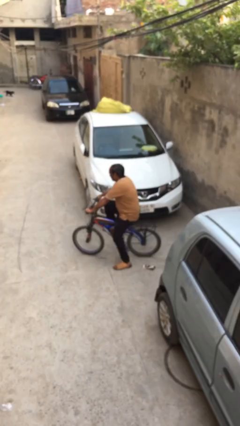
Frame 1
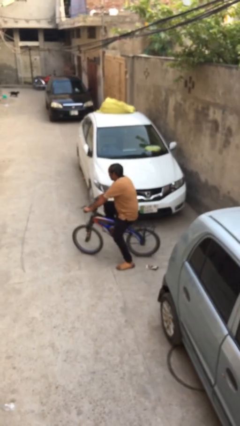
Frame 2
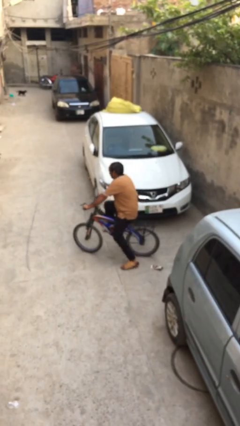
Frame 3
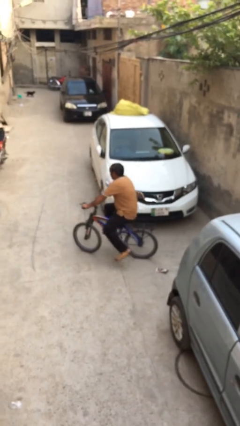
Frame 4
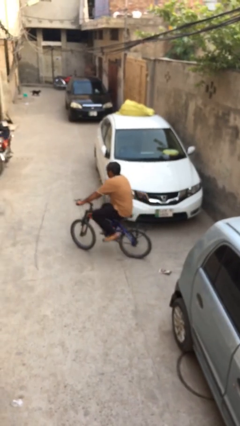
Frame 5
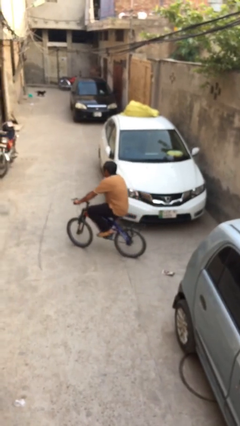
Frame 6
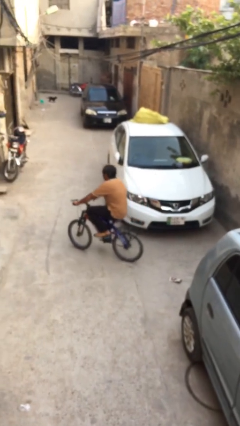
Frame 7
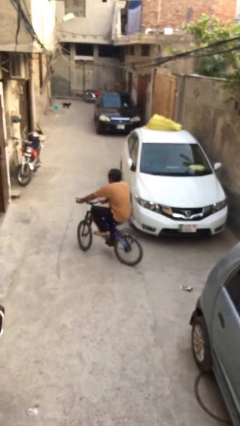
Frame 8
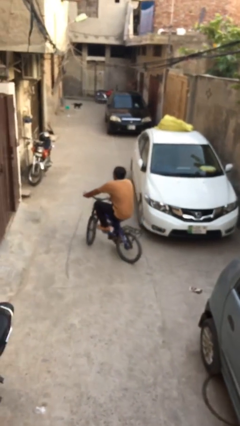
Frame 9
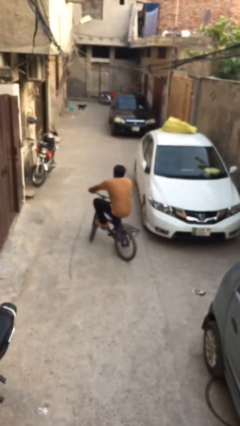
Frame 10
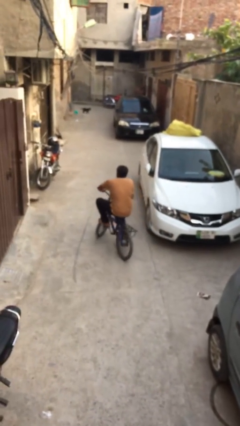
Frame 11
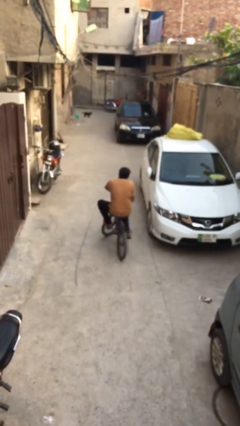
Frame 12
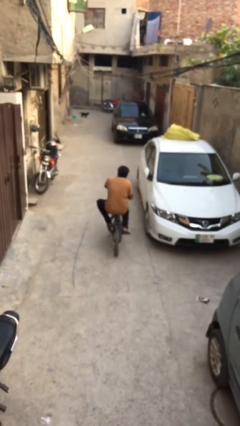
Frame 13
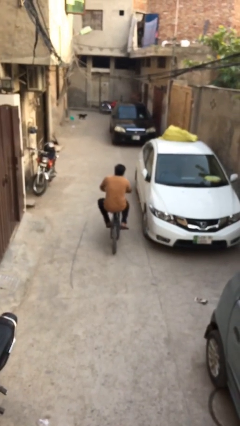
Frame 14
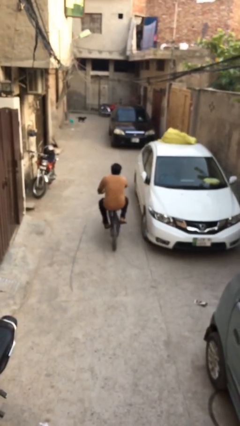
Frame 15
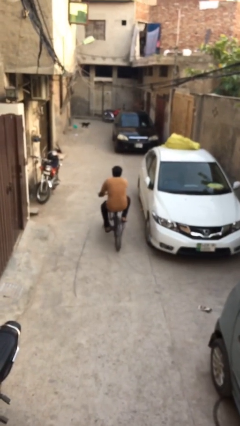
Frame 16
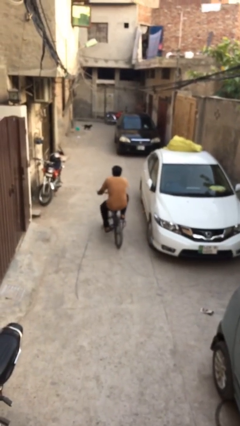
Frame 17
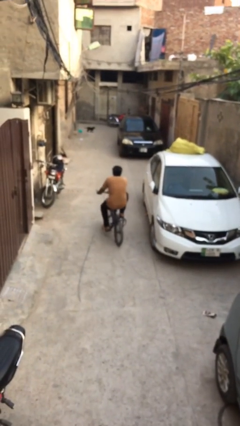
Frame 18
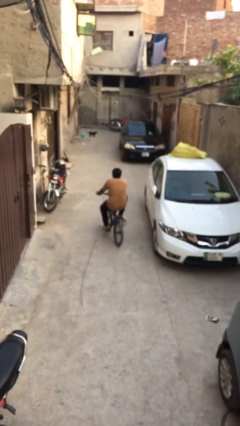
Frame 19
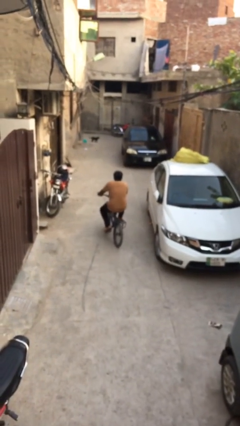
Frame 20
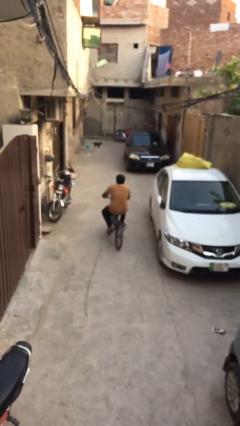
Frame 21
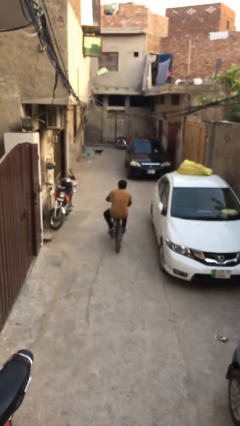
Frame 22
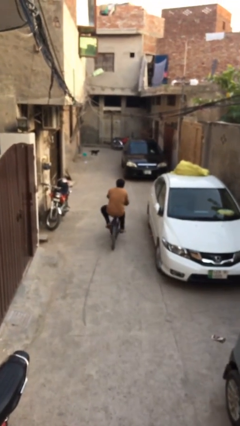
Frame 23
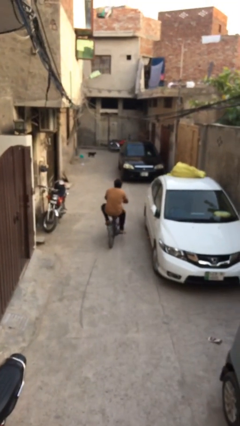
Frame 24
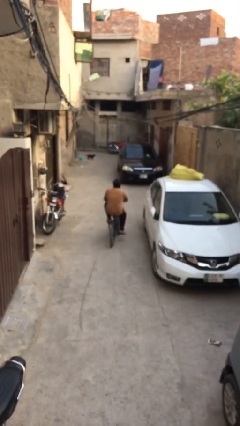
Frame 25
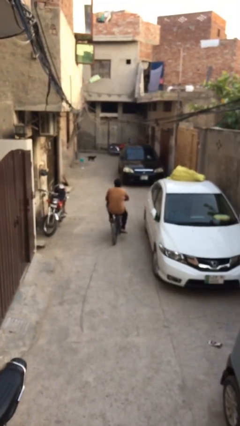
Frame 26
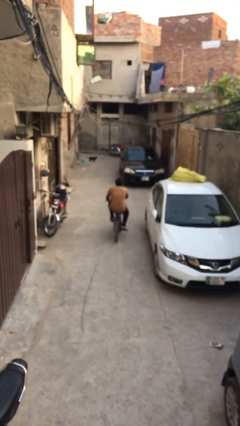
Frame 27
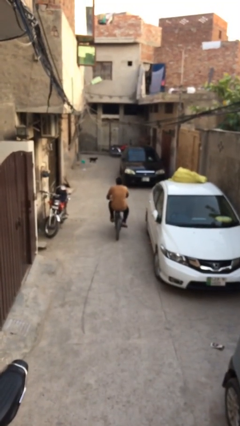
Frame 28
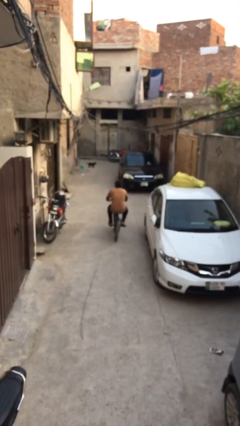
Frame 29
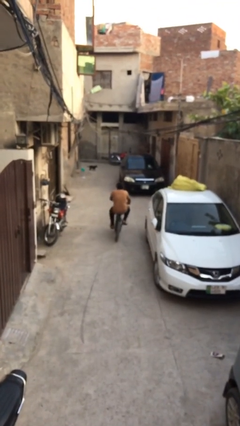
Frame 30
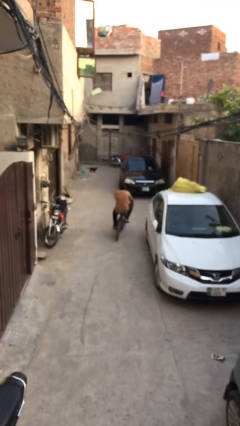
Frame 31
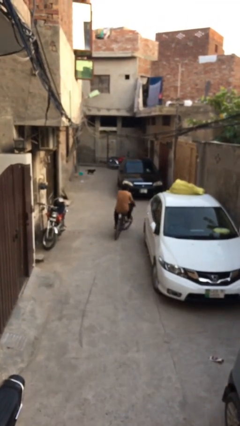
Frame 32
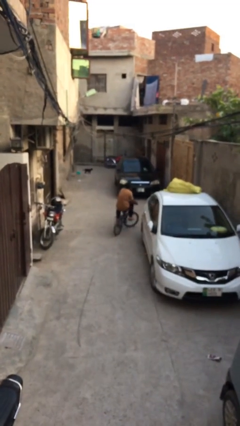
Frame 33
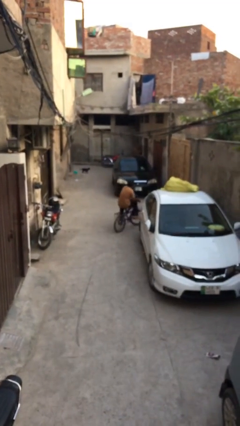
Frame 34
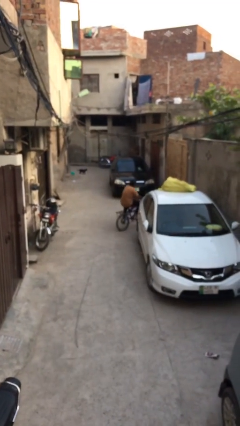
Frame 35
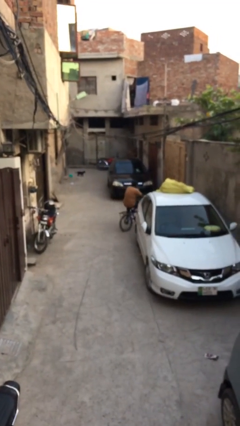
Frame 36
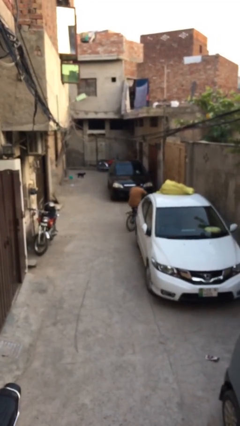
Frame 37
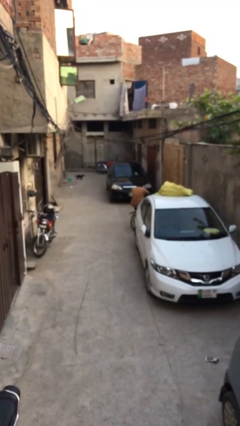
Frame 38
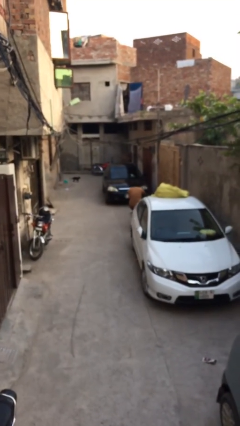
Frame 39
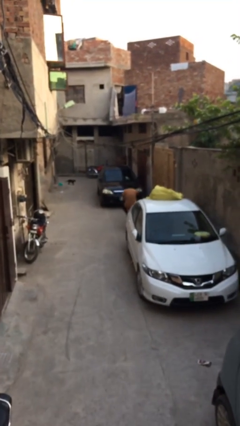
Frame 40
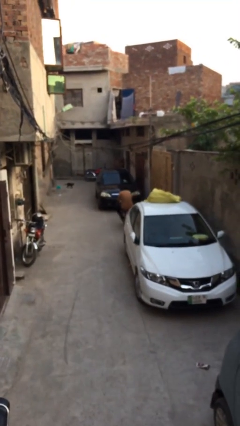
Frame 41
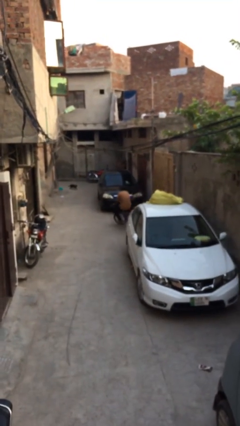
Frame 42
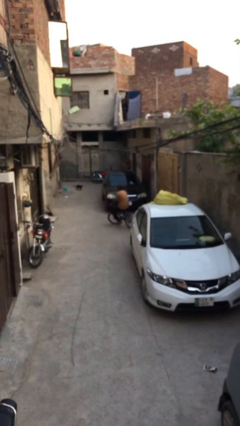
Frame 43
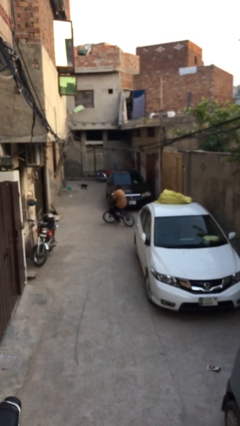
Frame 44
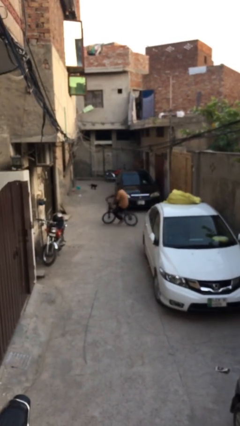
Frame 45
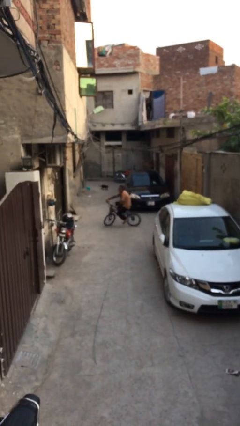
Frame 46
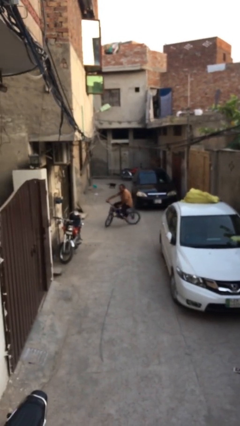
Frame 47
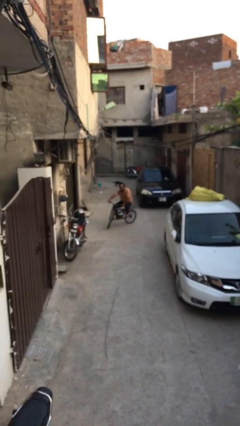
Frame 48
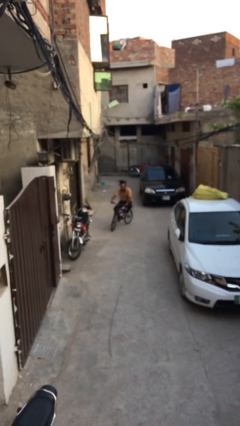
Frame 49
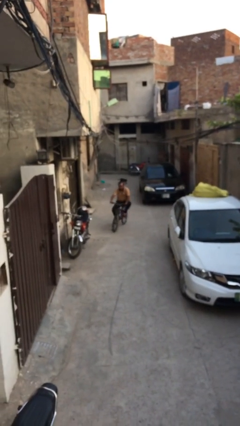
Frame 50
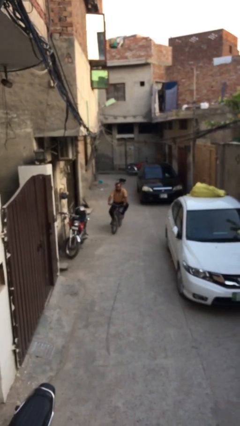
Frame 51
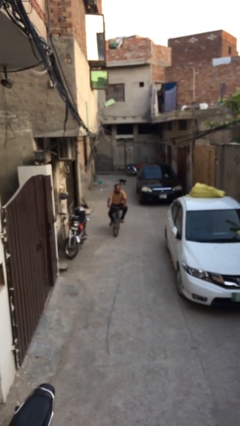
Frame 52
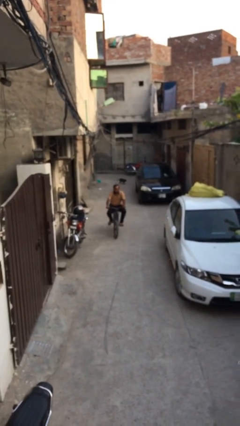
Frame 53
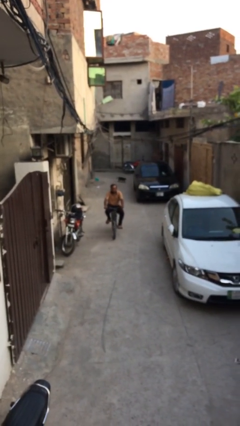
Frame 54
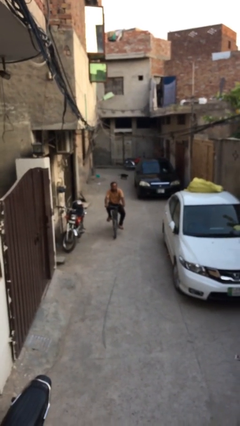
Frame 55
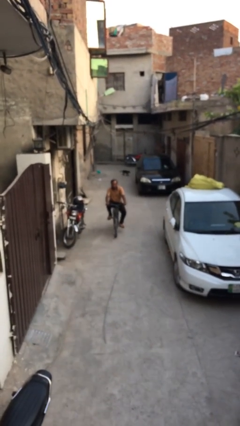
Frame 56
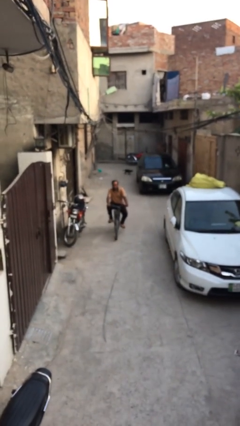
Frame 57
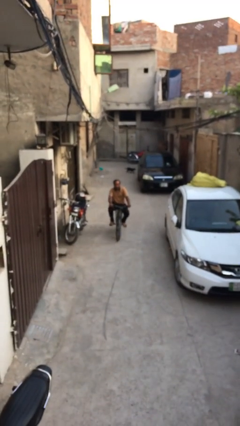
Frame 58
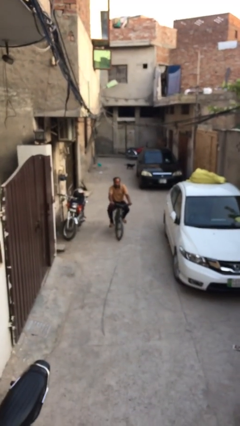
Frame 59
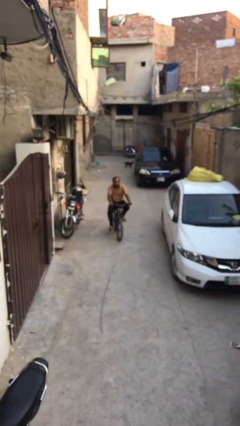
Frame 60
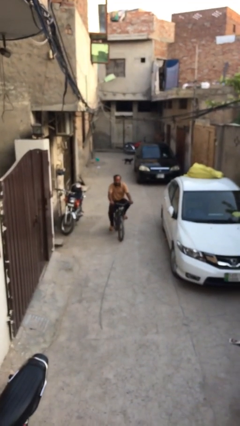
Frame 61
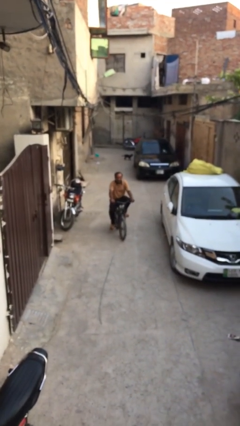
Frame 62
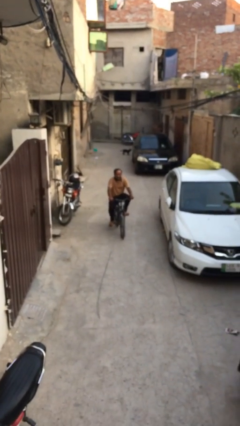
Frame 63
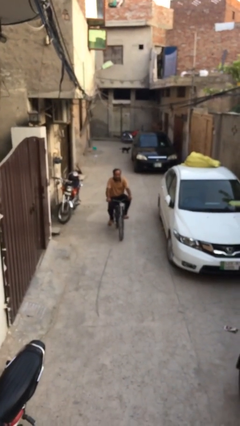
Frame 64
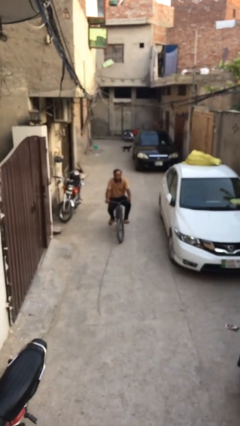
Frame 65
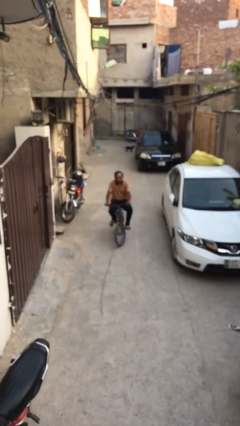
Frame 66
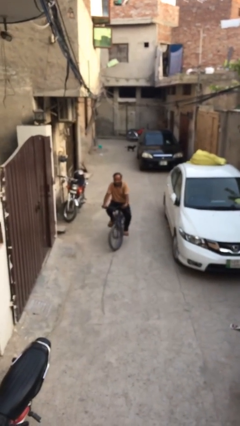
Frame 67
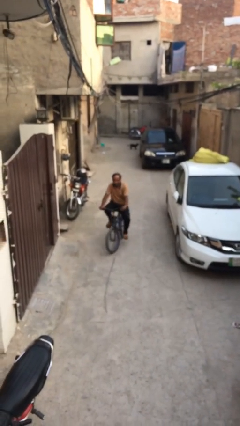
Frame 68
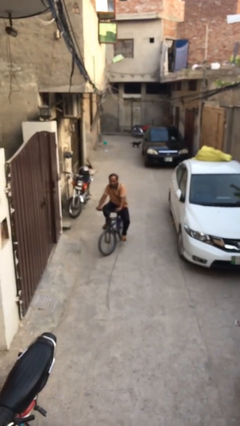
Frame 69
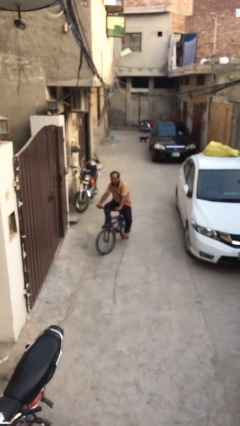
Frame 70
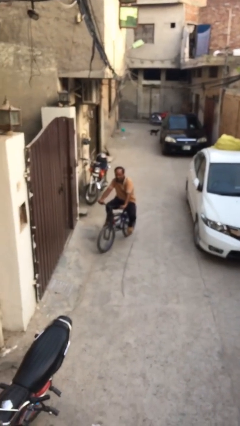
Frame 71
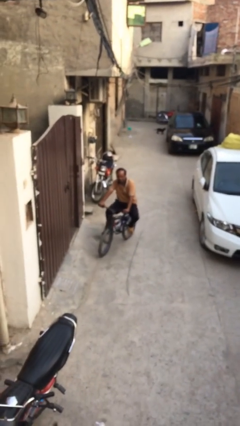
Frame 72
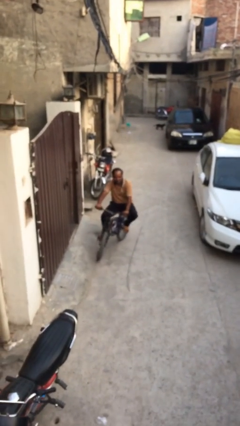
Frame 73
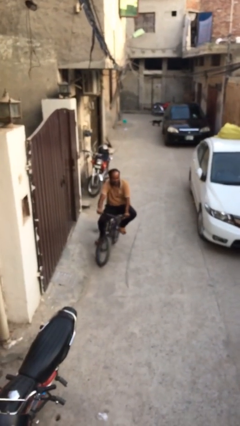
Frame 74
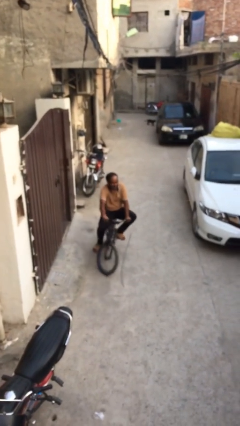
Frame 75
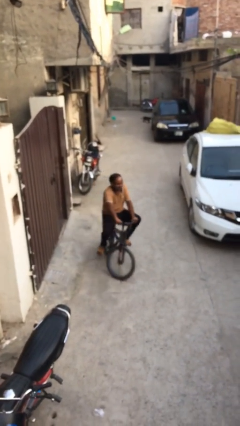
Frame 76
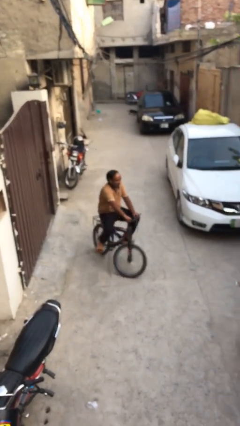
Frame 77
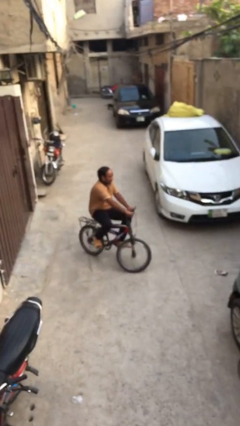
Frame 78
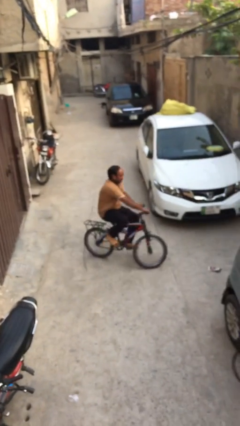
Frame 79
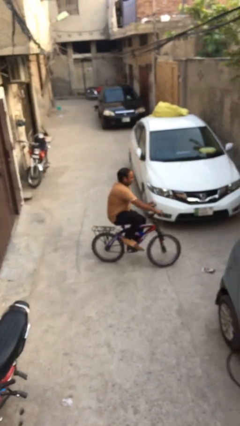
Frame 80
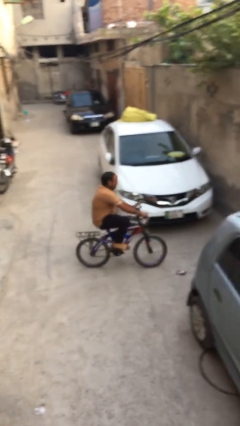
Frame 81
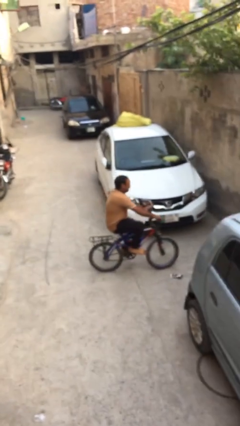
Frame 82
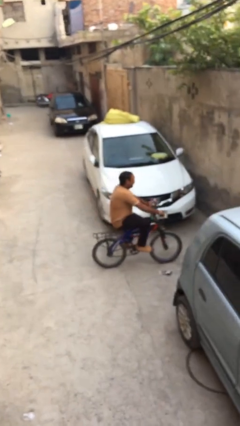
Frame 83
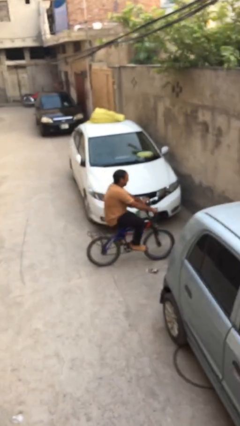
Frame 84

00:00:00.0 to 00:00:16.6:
person rides bicycle

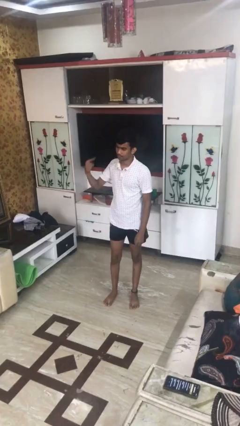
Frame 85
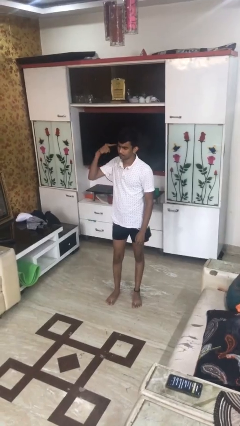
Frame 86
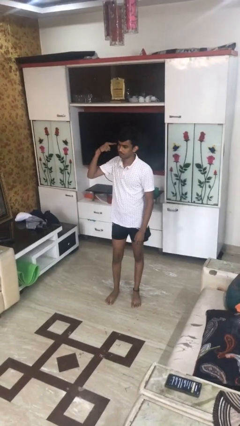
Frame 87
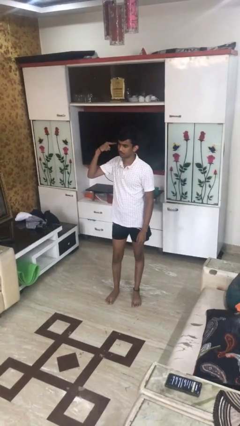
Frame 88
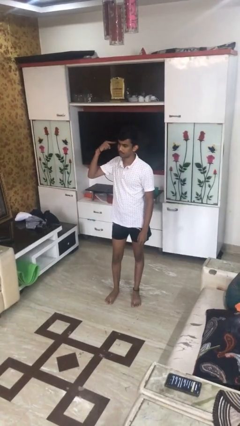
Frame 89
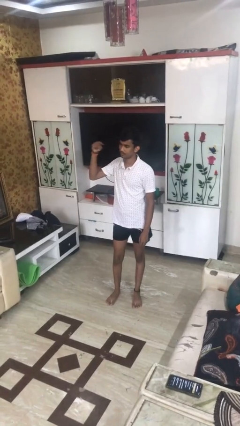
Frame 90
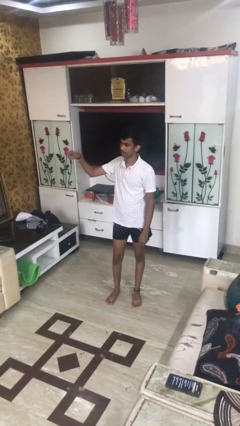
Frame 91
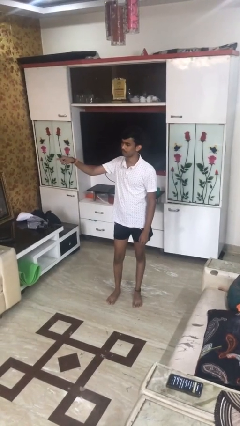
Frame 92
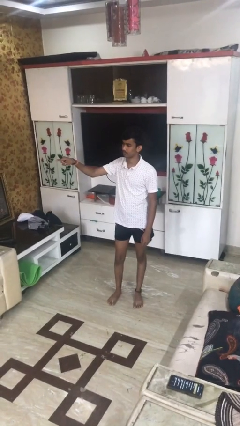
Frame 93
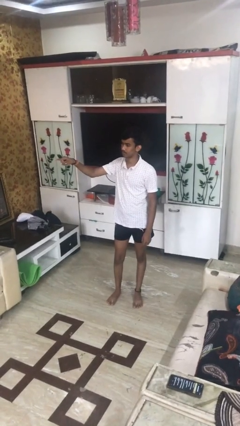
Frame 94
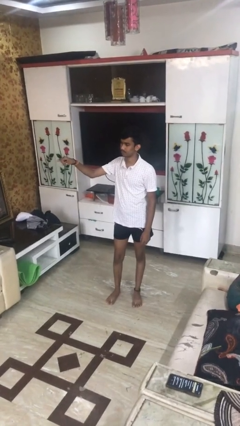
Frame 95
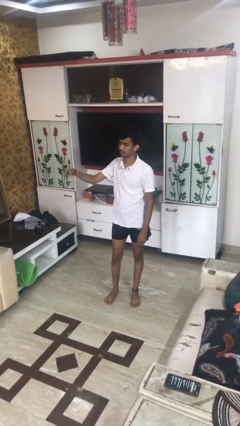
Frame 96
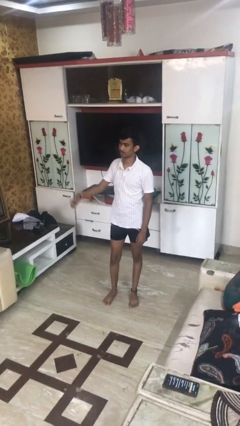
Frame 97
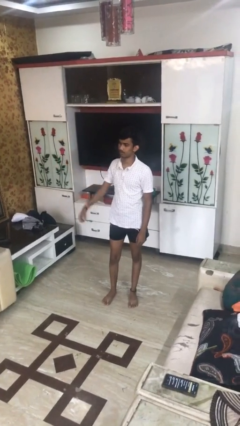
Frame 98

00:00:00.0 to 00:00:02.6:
person gestures listen closely
